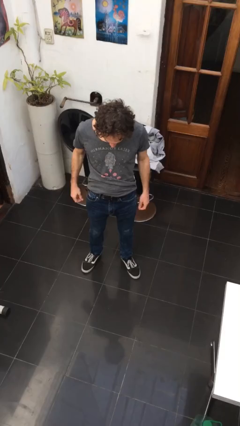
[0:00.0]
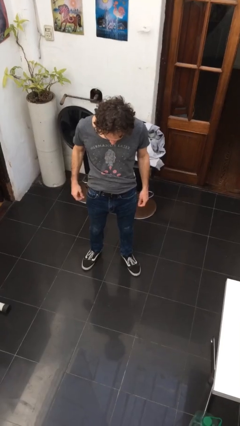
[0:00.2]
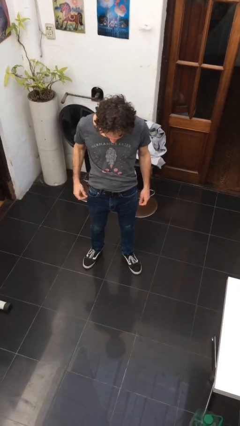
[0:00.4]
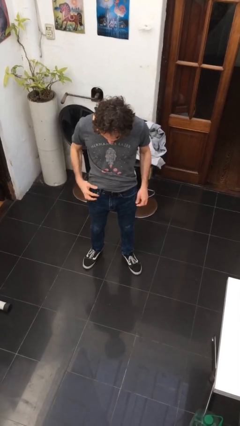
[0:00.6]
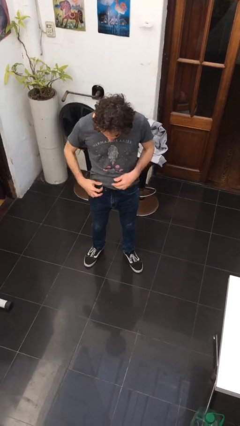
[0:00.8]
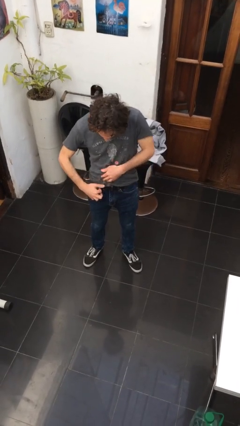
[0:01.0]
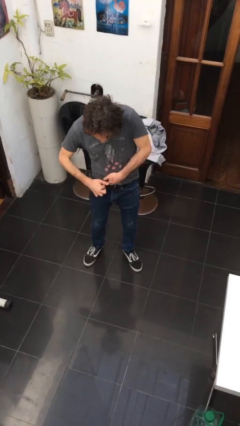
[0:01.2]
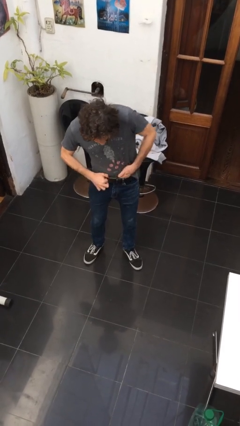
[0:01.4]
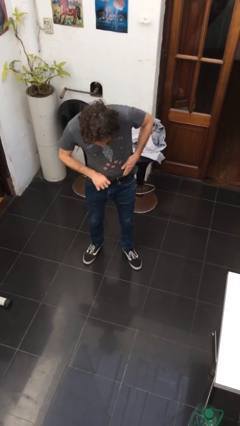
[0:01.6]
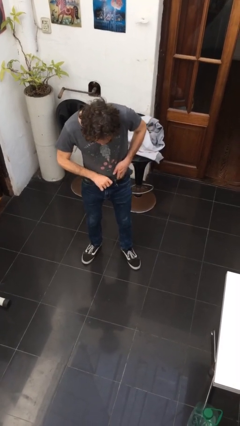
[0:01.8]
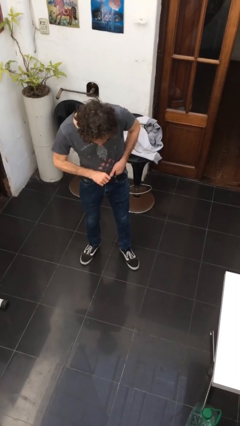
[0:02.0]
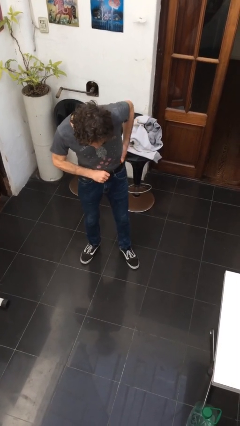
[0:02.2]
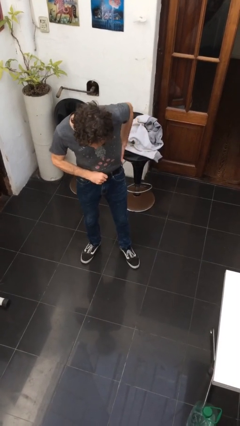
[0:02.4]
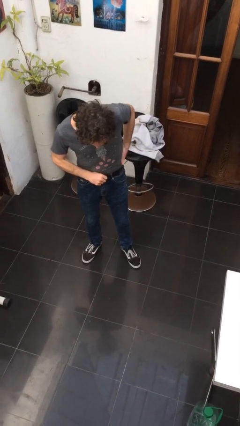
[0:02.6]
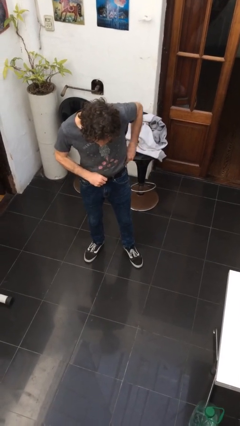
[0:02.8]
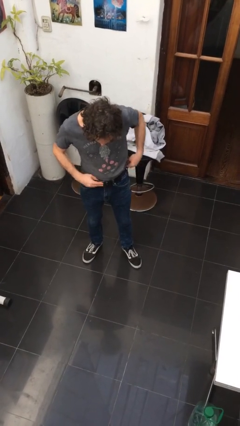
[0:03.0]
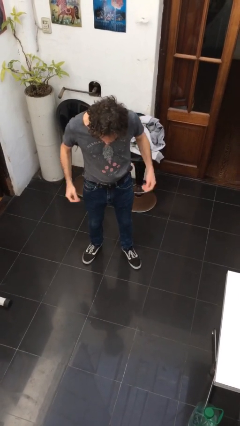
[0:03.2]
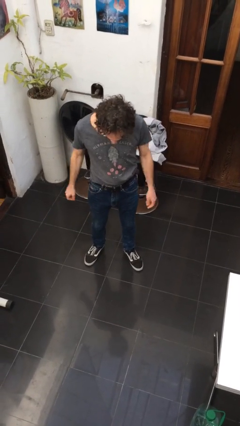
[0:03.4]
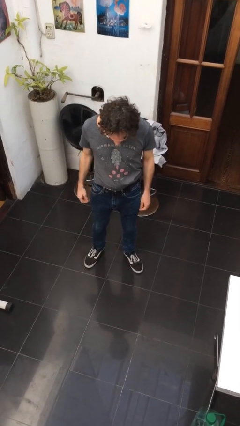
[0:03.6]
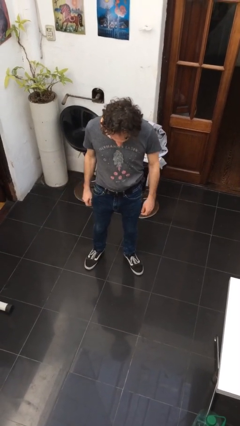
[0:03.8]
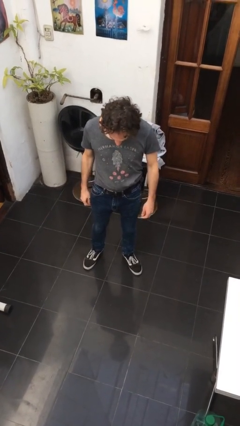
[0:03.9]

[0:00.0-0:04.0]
person tucks in shirt

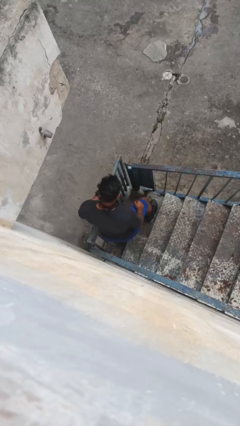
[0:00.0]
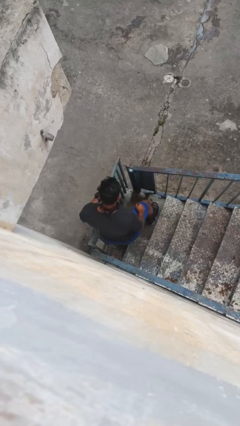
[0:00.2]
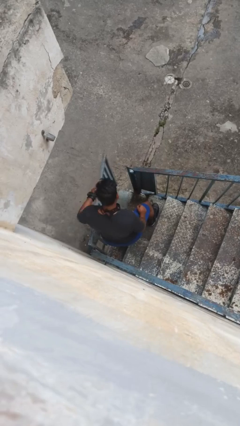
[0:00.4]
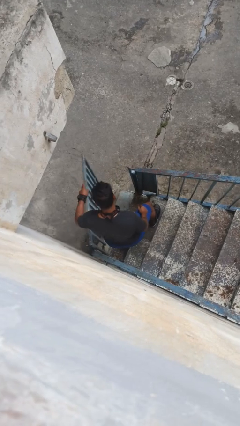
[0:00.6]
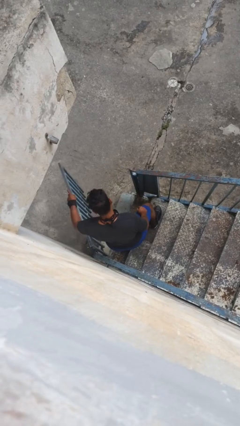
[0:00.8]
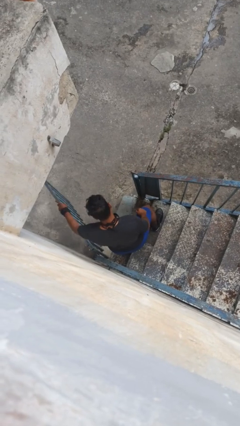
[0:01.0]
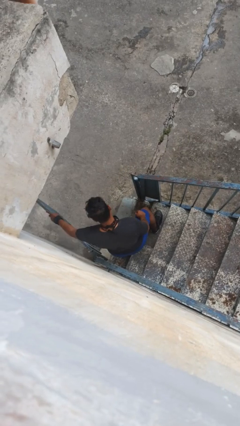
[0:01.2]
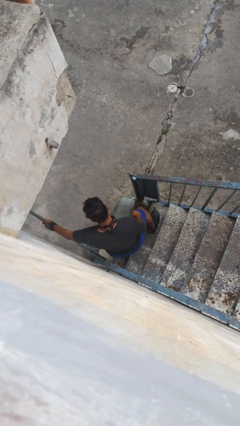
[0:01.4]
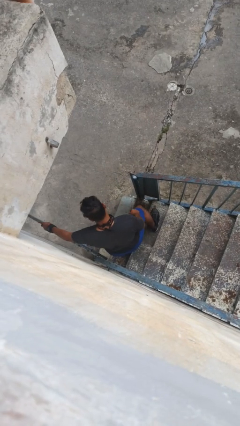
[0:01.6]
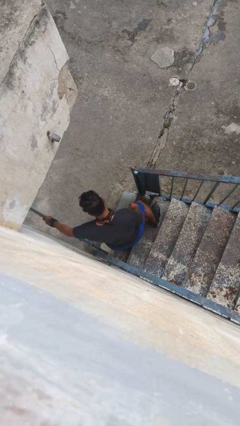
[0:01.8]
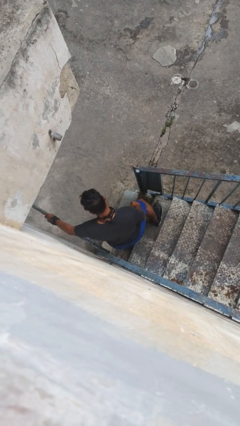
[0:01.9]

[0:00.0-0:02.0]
person opens facility door

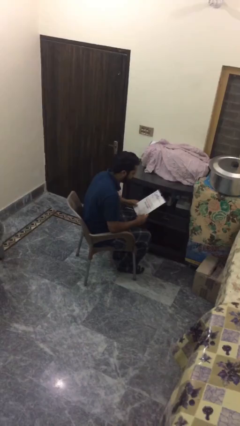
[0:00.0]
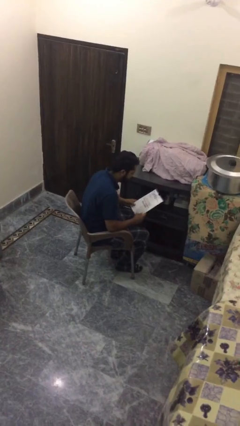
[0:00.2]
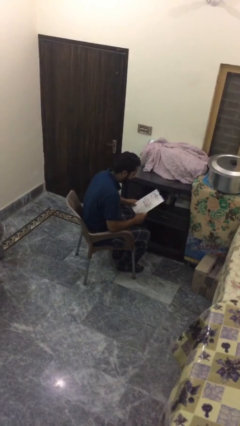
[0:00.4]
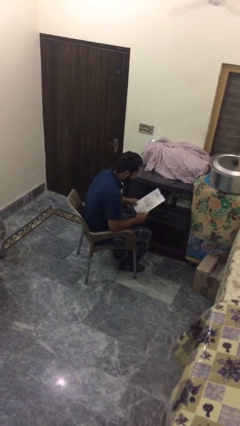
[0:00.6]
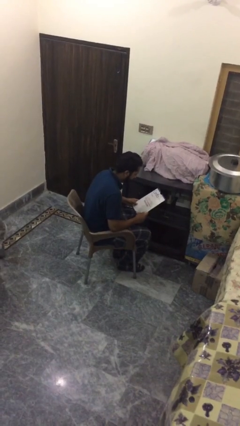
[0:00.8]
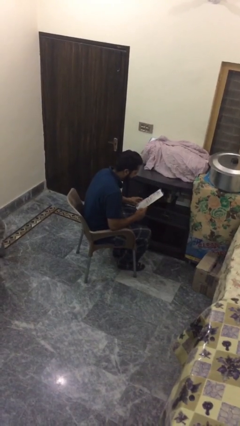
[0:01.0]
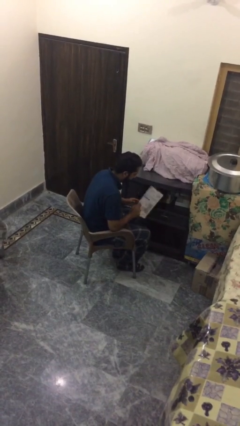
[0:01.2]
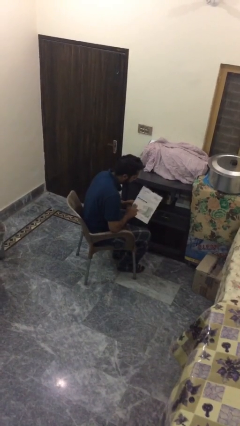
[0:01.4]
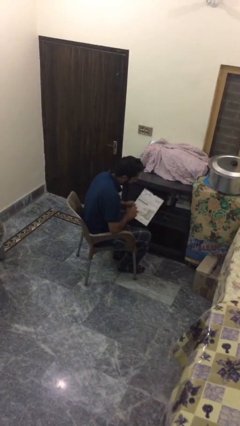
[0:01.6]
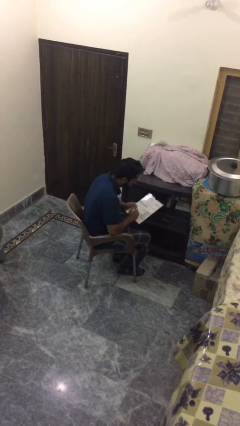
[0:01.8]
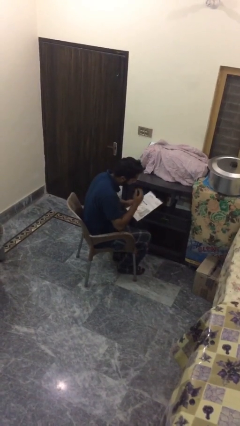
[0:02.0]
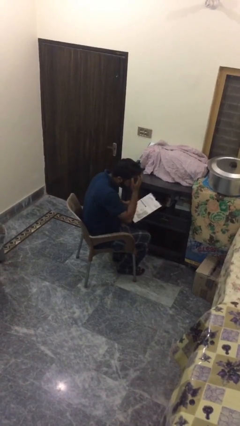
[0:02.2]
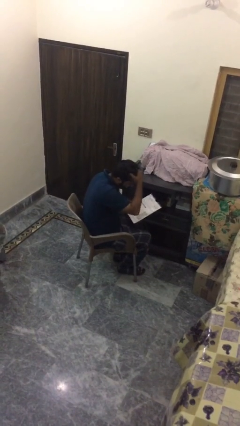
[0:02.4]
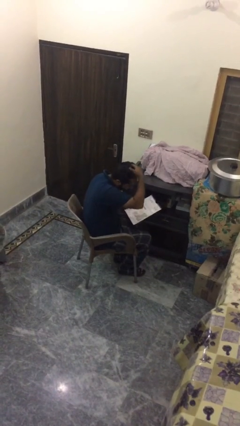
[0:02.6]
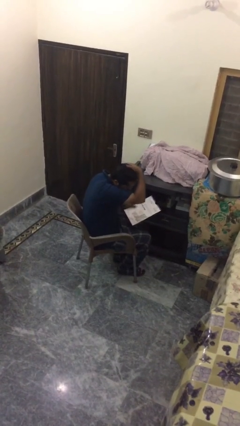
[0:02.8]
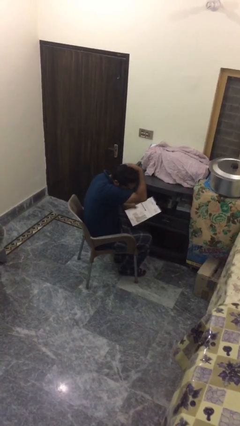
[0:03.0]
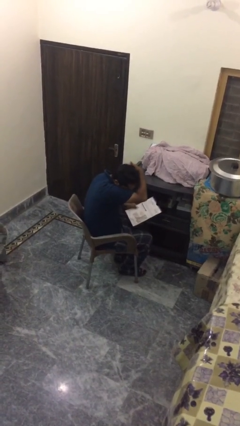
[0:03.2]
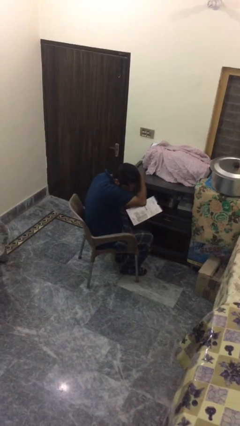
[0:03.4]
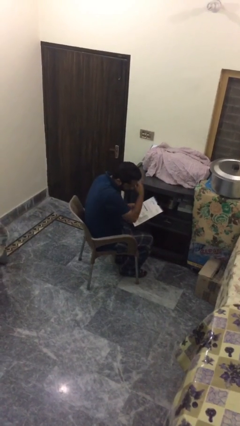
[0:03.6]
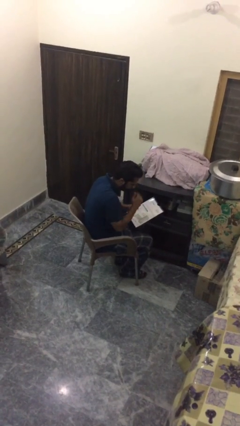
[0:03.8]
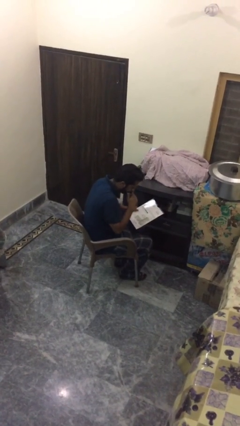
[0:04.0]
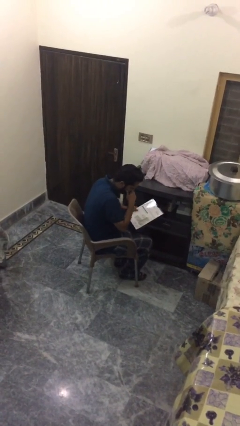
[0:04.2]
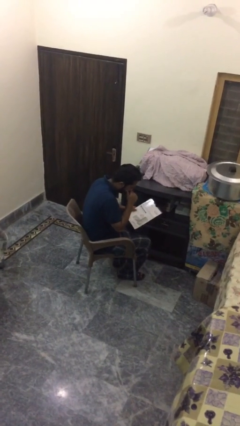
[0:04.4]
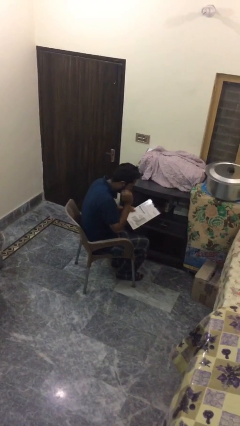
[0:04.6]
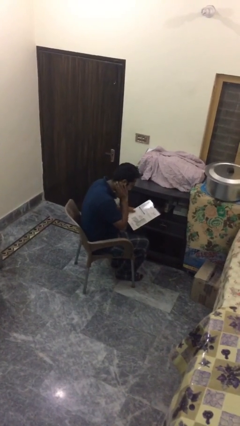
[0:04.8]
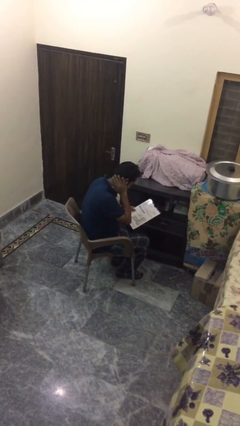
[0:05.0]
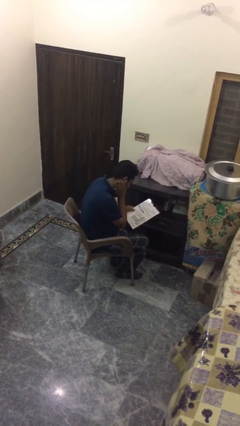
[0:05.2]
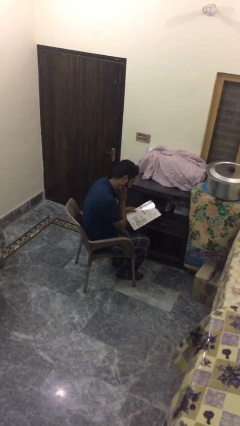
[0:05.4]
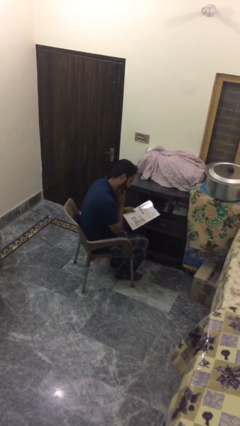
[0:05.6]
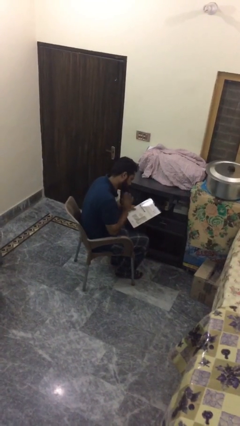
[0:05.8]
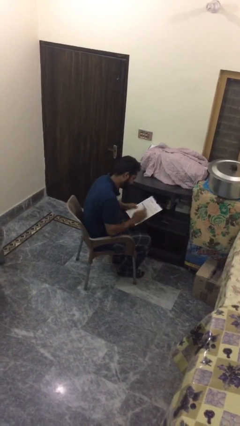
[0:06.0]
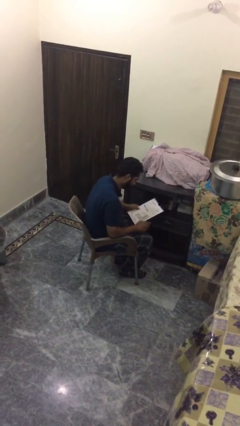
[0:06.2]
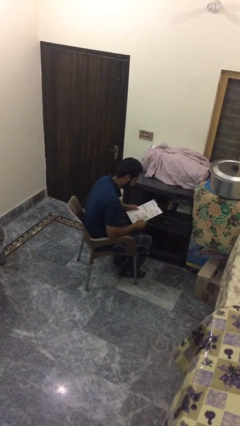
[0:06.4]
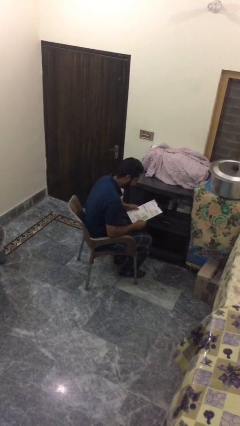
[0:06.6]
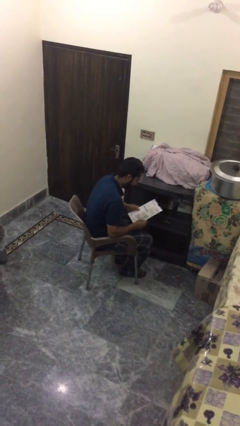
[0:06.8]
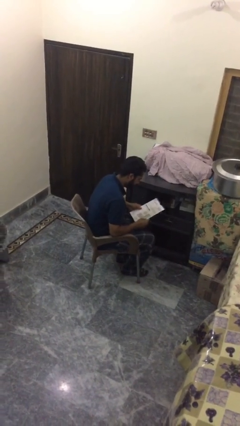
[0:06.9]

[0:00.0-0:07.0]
person reads document

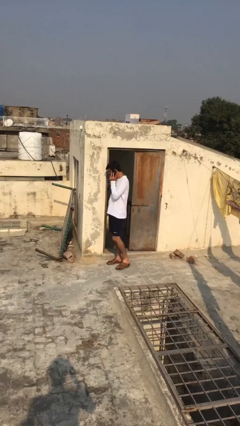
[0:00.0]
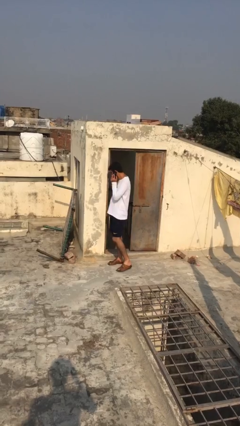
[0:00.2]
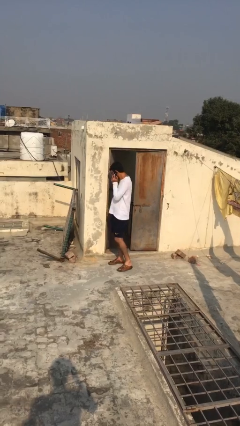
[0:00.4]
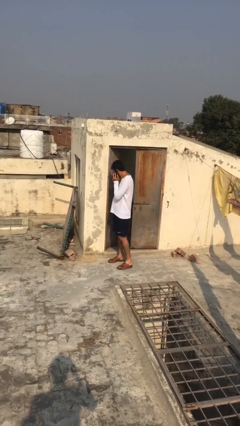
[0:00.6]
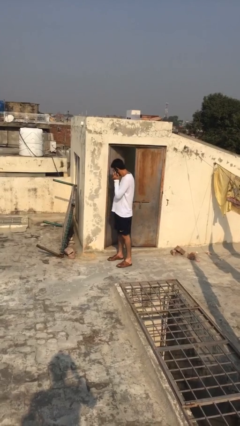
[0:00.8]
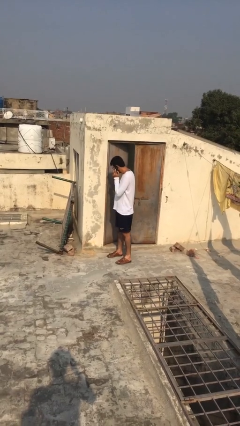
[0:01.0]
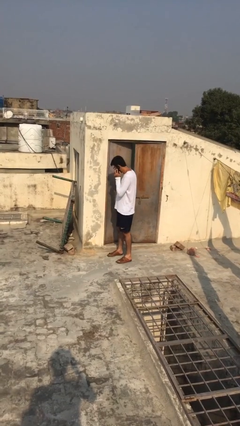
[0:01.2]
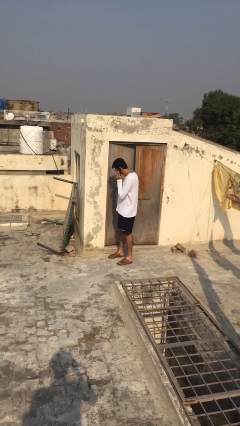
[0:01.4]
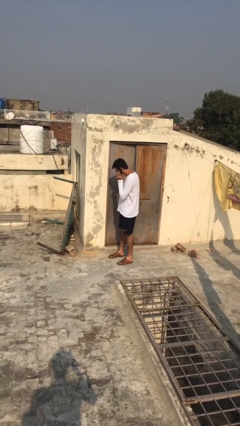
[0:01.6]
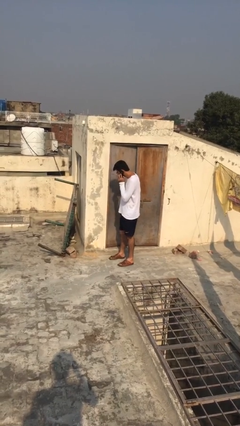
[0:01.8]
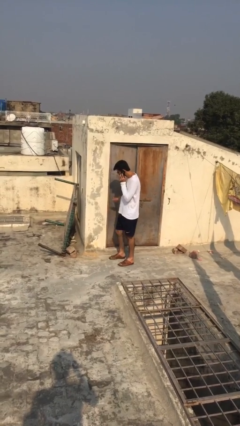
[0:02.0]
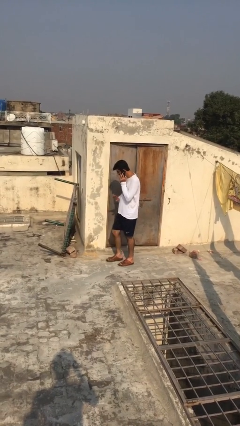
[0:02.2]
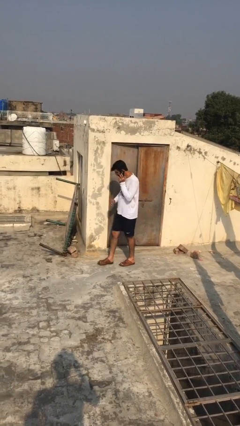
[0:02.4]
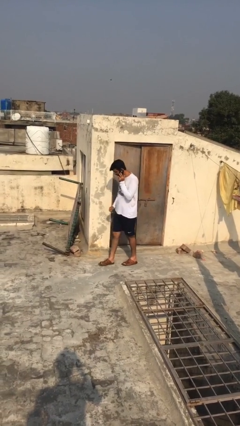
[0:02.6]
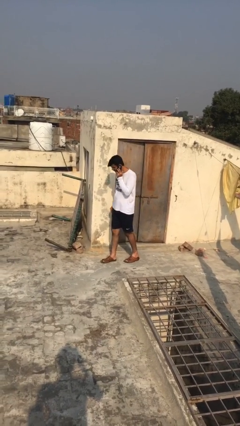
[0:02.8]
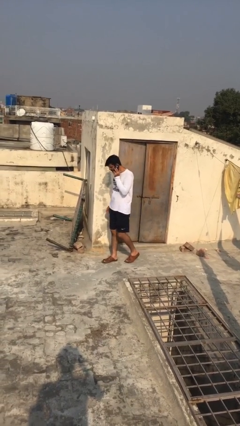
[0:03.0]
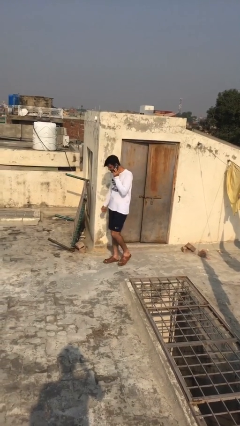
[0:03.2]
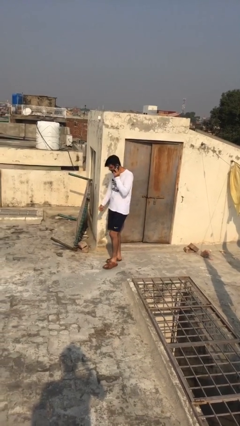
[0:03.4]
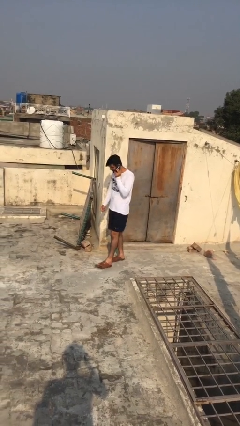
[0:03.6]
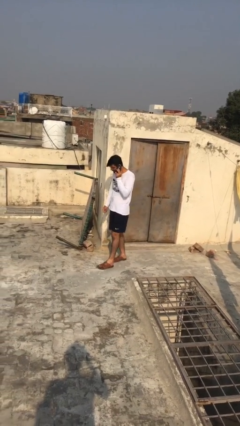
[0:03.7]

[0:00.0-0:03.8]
person closes facility door

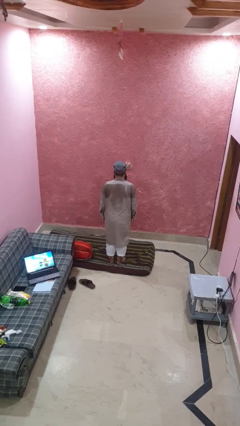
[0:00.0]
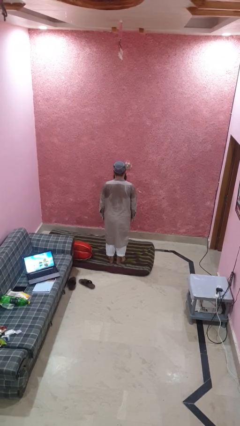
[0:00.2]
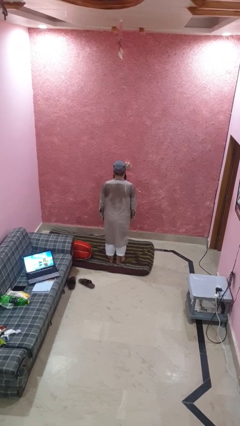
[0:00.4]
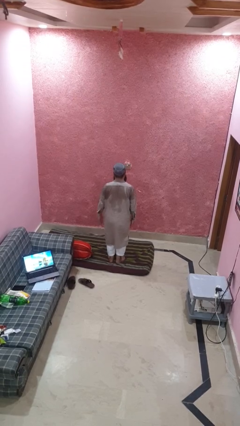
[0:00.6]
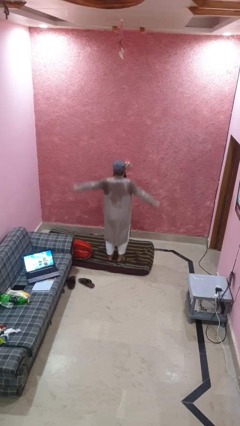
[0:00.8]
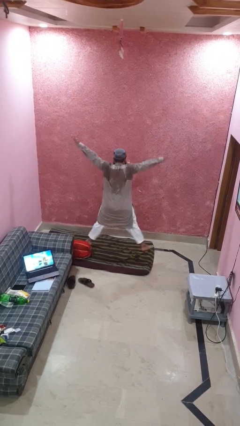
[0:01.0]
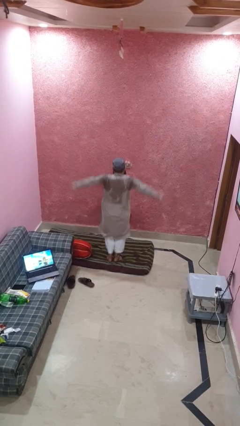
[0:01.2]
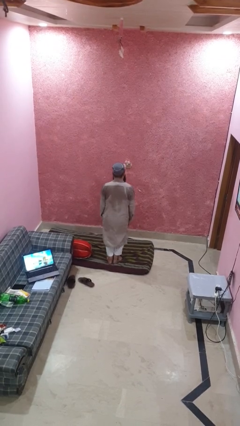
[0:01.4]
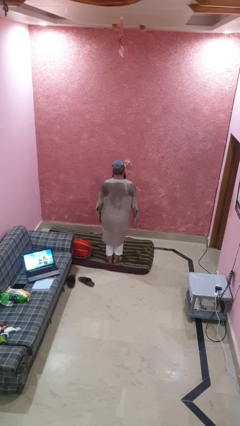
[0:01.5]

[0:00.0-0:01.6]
person exercises with jumping jacks
